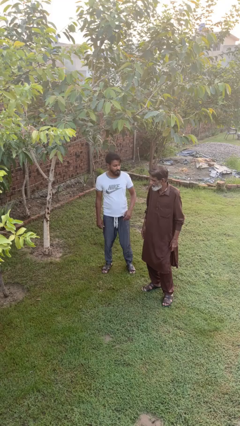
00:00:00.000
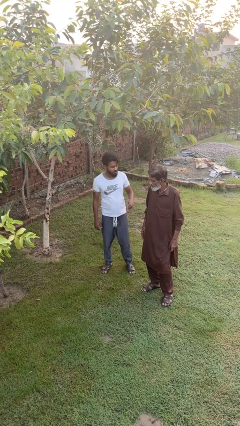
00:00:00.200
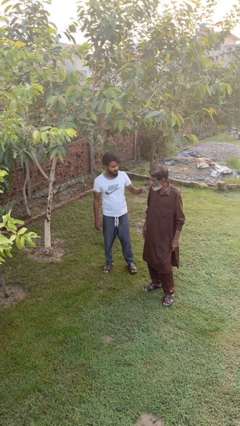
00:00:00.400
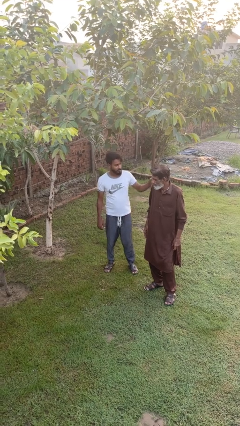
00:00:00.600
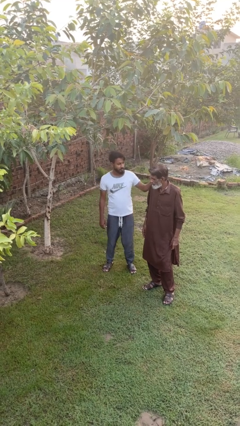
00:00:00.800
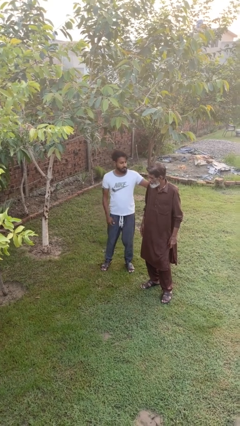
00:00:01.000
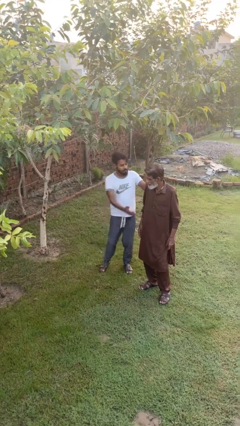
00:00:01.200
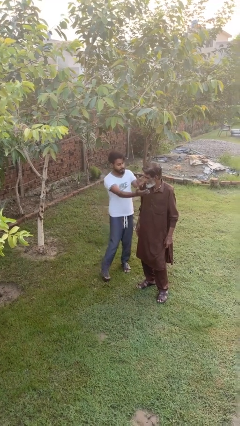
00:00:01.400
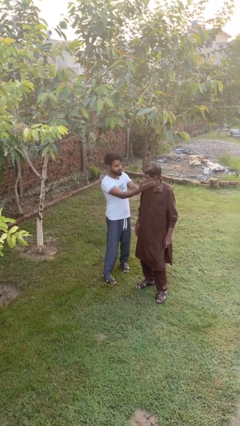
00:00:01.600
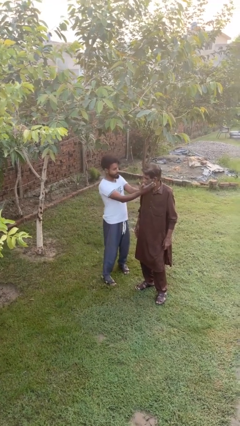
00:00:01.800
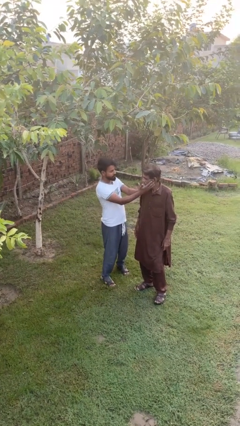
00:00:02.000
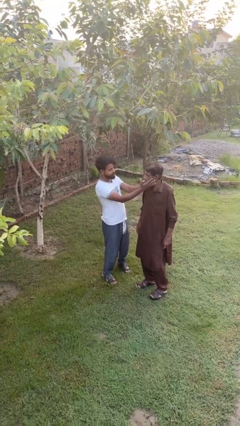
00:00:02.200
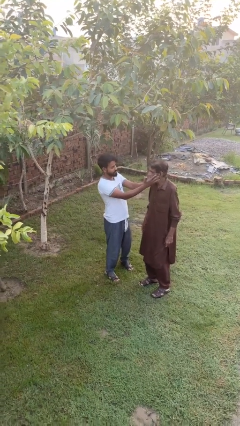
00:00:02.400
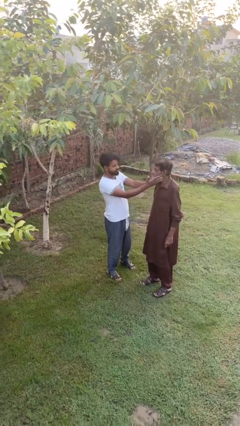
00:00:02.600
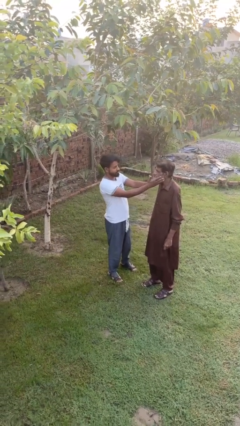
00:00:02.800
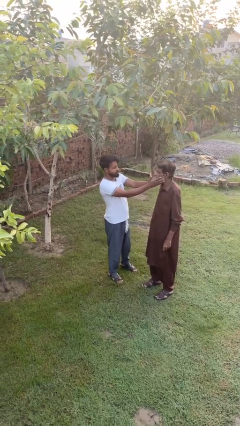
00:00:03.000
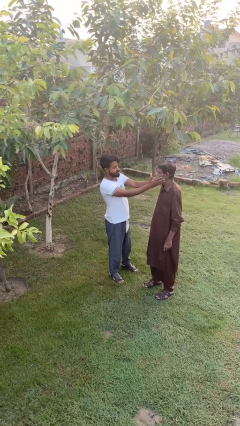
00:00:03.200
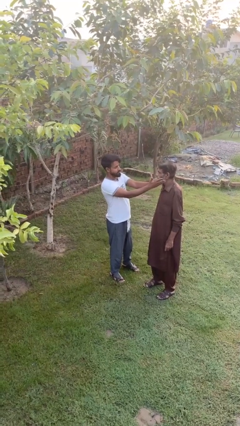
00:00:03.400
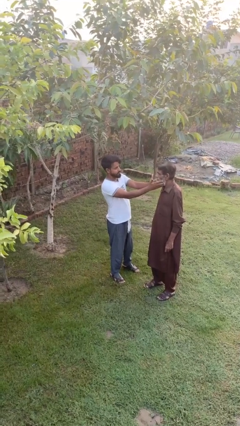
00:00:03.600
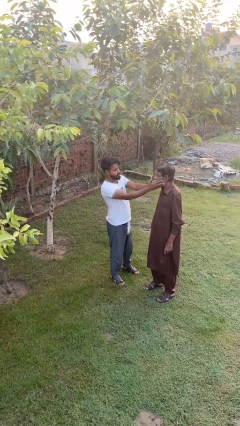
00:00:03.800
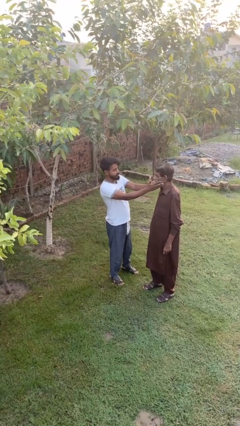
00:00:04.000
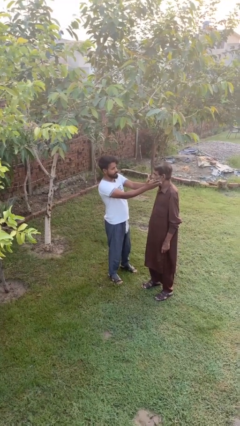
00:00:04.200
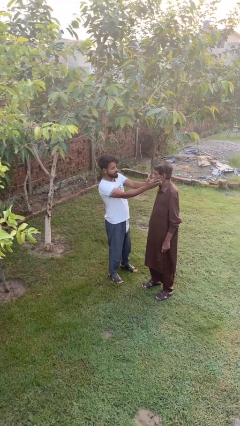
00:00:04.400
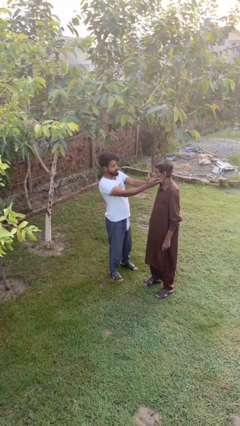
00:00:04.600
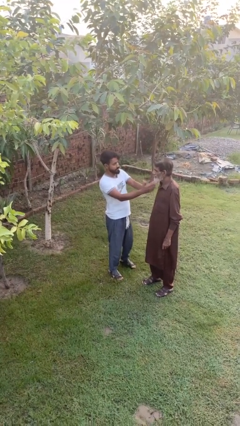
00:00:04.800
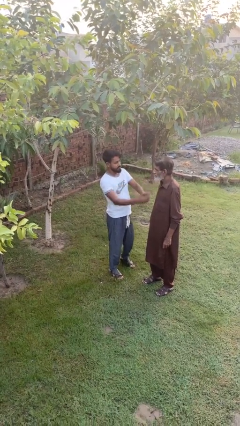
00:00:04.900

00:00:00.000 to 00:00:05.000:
person touches face of person

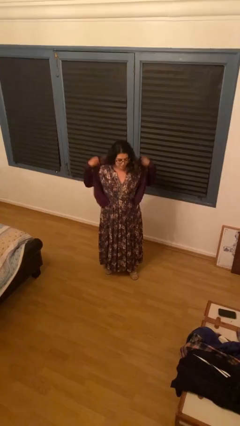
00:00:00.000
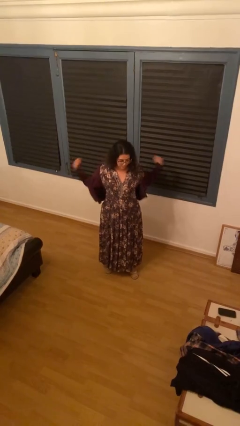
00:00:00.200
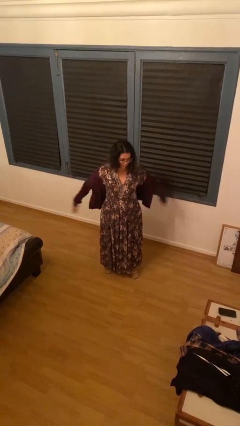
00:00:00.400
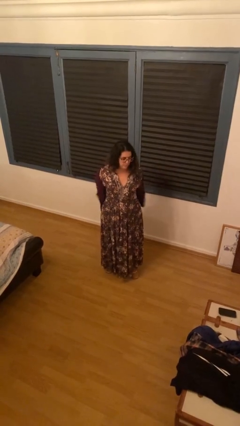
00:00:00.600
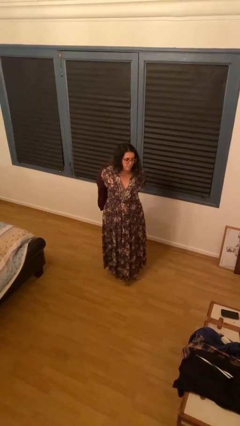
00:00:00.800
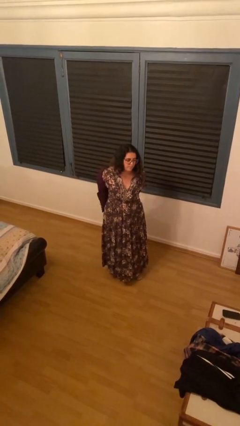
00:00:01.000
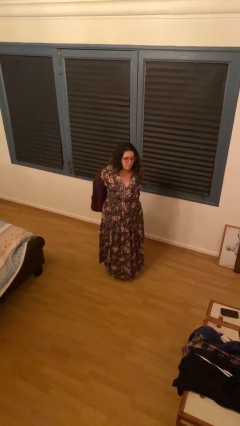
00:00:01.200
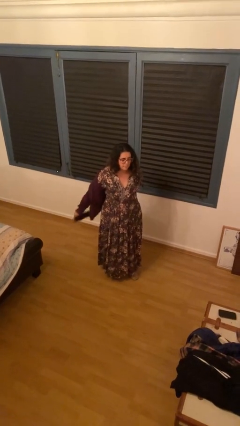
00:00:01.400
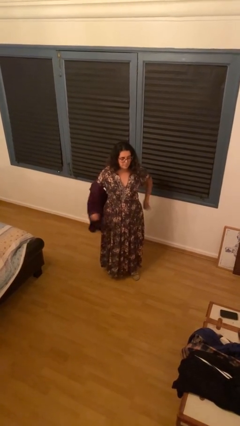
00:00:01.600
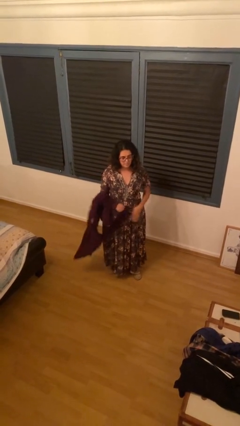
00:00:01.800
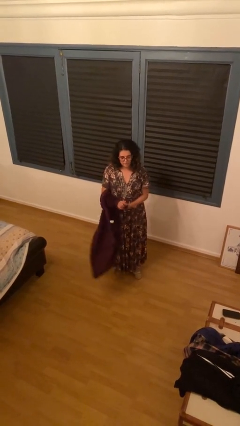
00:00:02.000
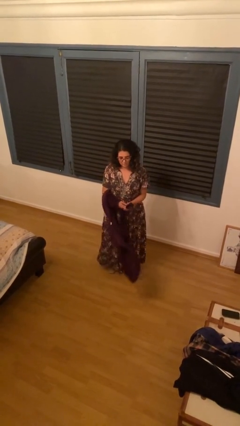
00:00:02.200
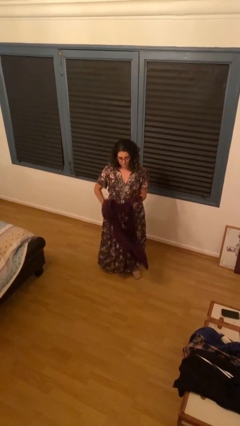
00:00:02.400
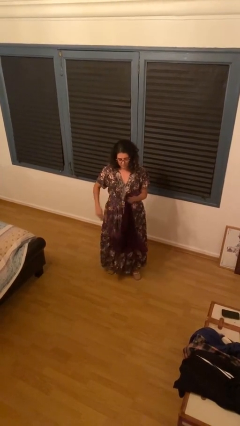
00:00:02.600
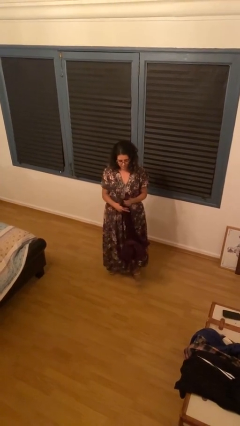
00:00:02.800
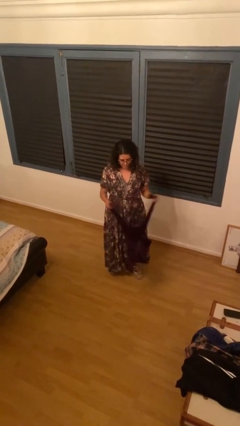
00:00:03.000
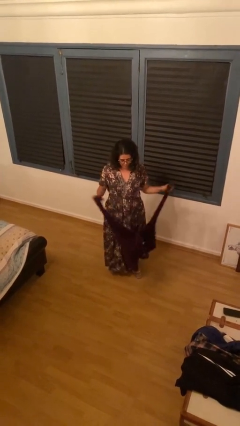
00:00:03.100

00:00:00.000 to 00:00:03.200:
person takes off jacket

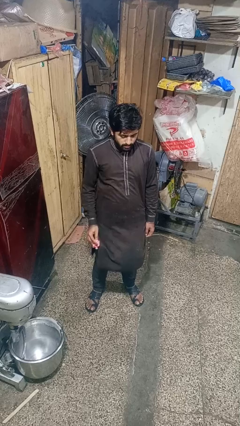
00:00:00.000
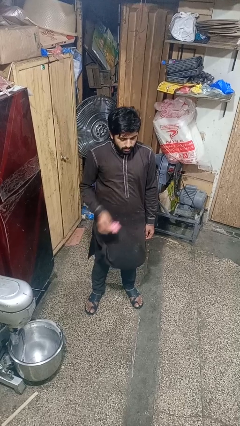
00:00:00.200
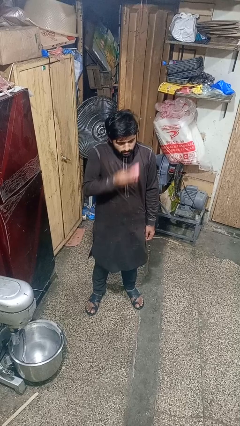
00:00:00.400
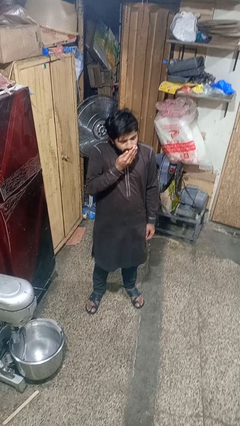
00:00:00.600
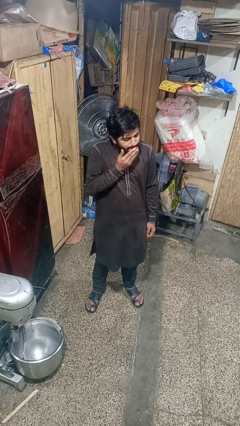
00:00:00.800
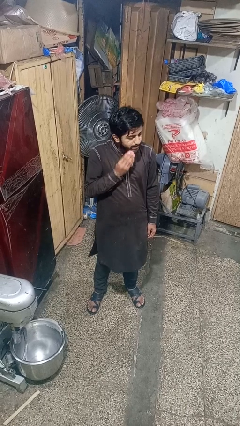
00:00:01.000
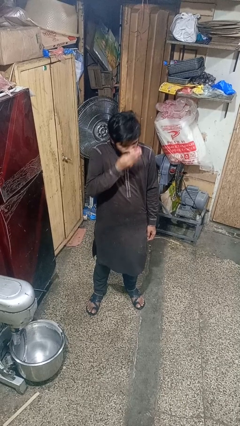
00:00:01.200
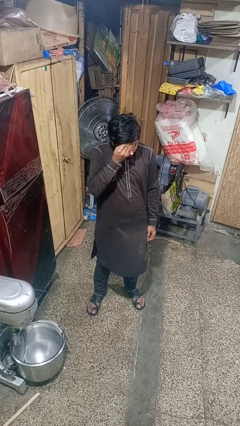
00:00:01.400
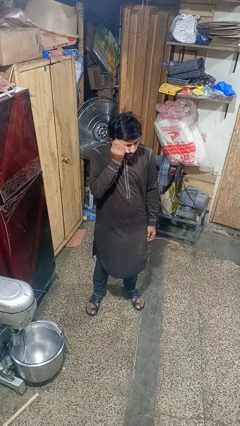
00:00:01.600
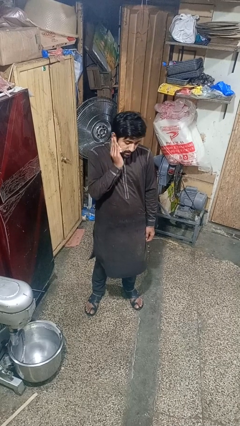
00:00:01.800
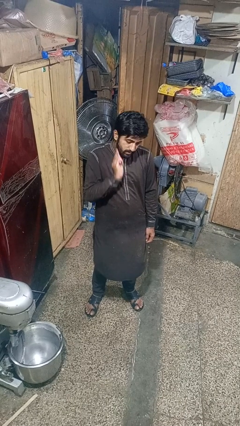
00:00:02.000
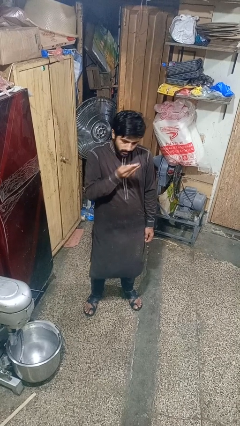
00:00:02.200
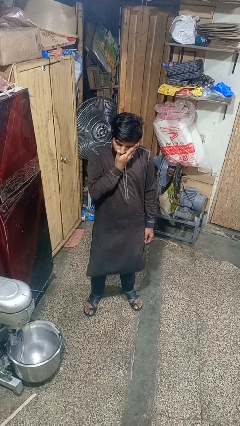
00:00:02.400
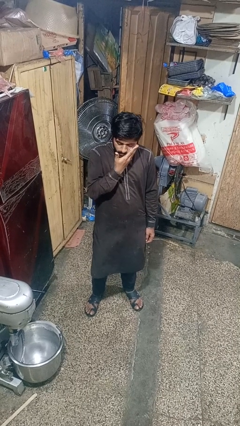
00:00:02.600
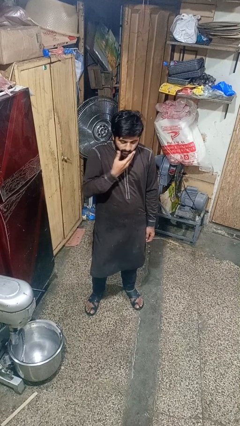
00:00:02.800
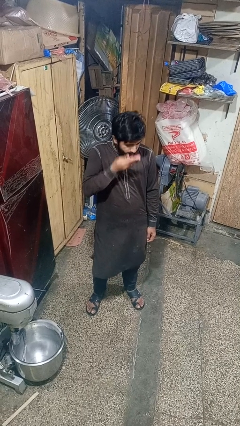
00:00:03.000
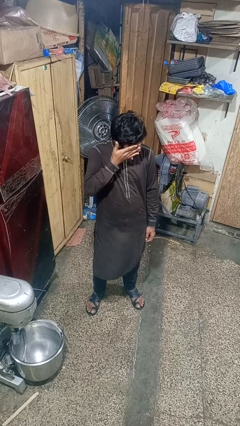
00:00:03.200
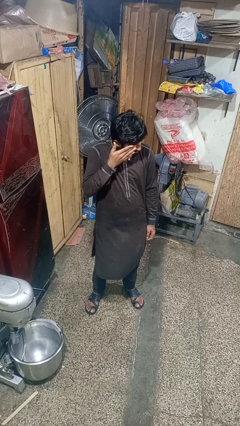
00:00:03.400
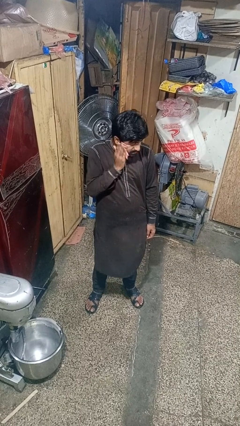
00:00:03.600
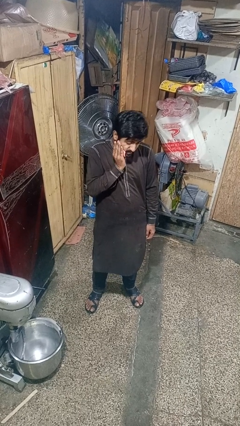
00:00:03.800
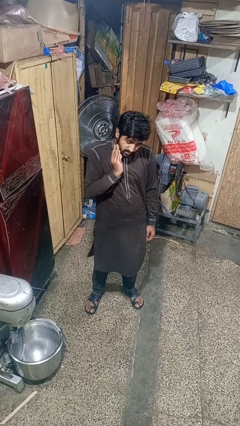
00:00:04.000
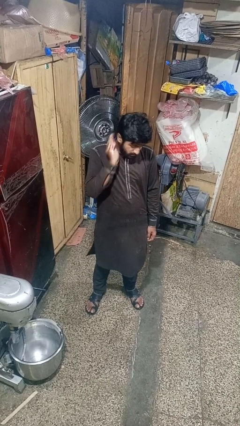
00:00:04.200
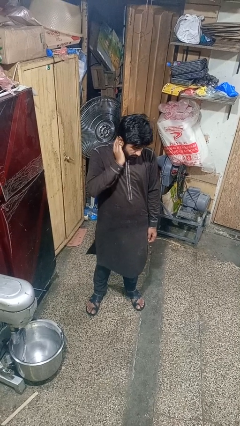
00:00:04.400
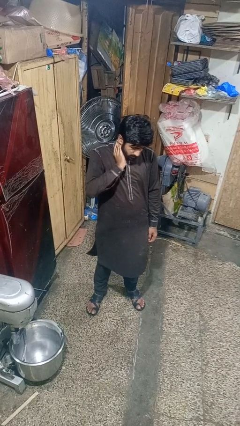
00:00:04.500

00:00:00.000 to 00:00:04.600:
person wipes mouth with napkin

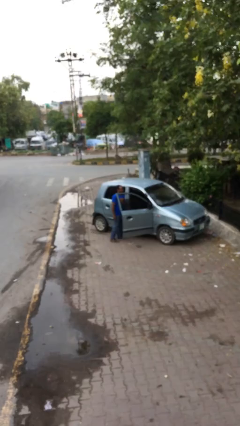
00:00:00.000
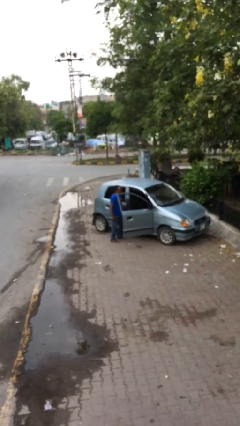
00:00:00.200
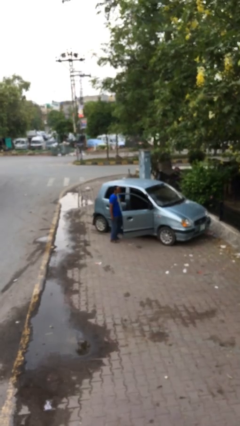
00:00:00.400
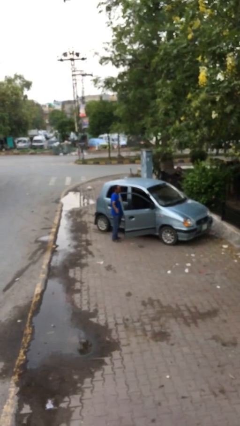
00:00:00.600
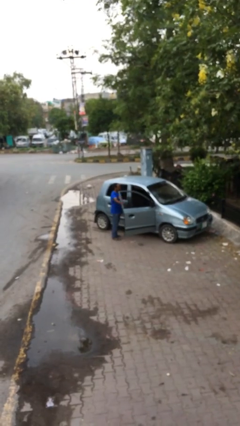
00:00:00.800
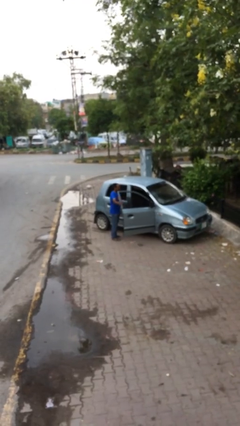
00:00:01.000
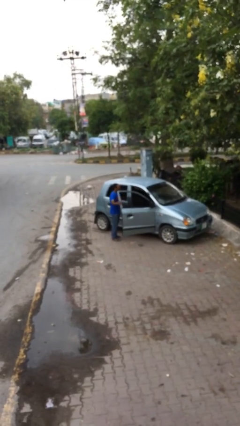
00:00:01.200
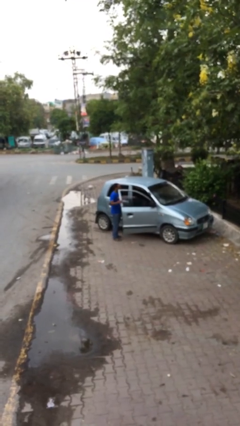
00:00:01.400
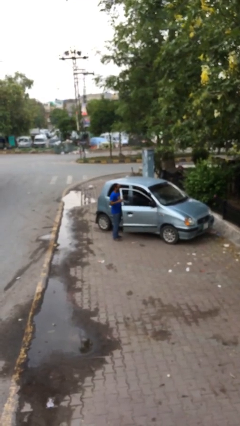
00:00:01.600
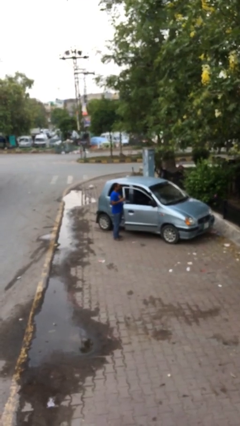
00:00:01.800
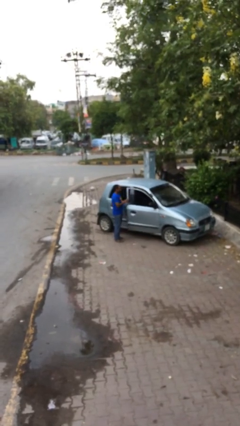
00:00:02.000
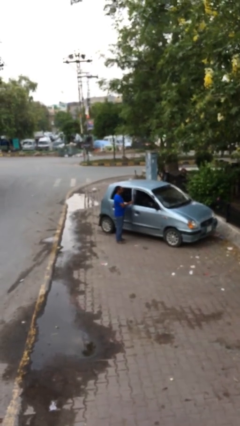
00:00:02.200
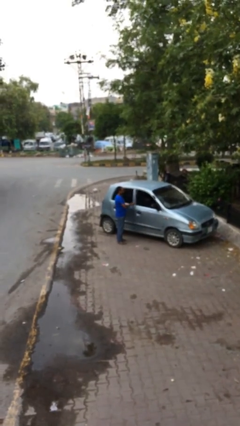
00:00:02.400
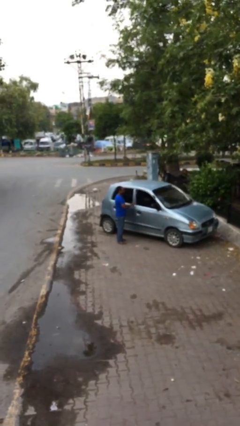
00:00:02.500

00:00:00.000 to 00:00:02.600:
person closes car door

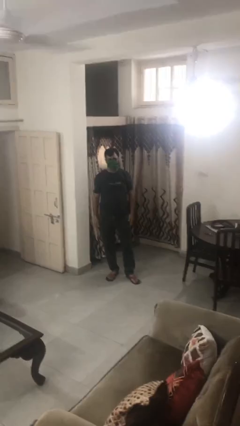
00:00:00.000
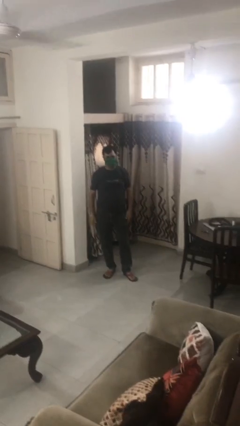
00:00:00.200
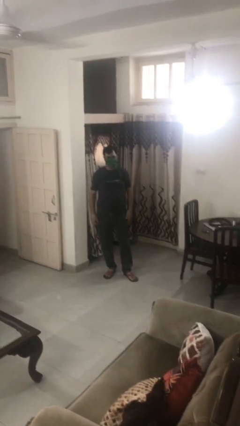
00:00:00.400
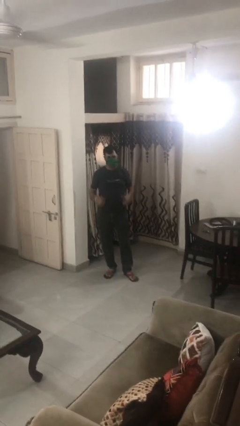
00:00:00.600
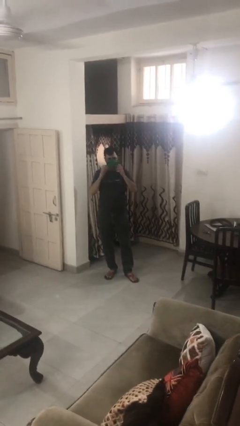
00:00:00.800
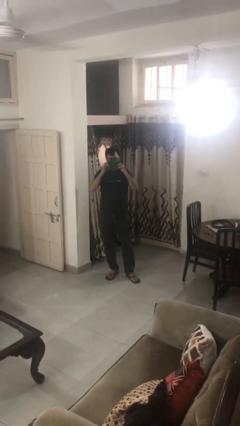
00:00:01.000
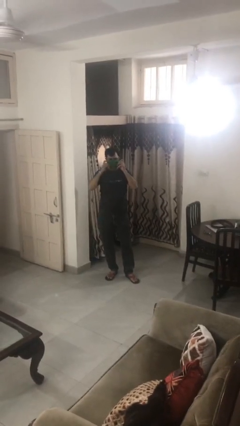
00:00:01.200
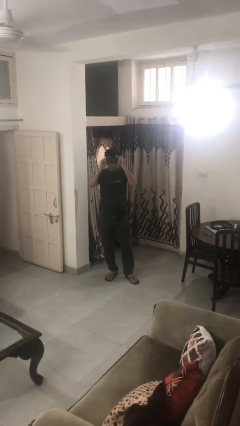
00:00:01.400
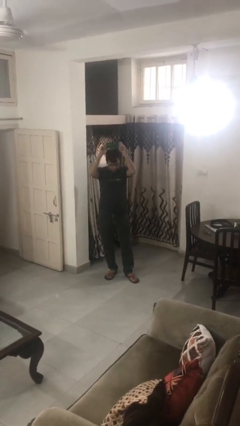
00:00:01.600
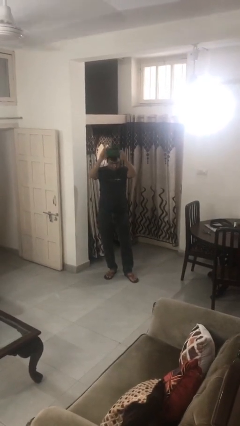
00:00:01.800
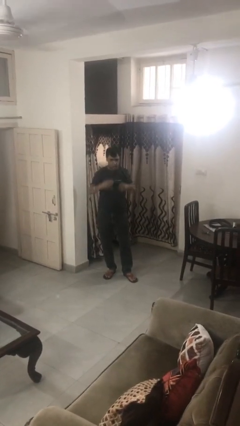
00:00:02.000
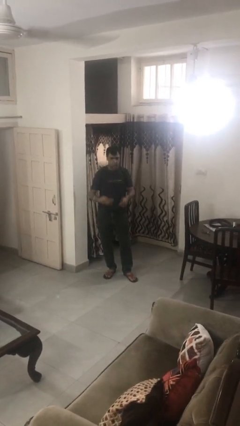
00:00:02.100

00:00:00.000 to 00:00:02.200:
person takes off facemask
